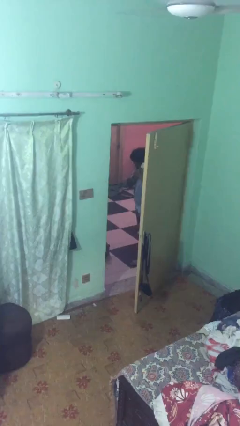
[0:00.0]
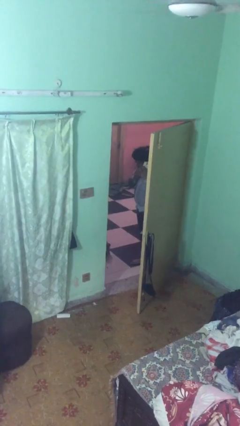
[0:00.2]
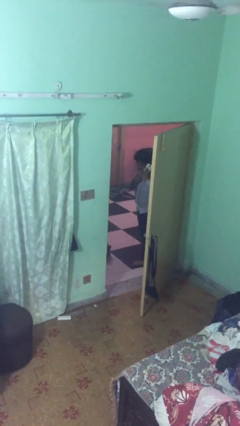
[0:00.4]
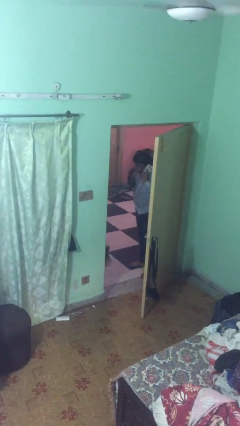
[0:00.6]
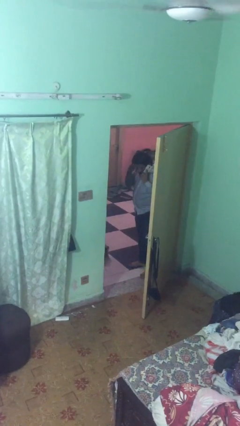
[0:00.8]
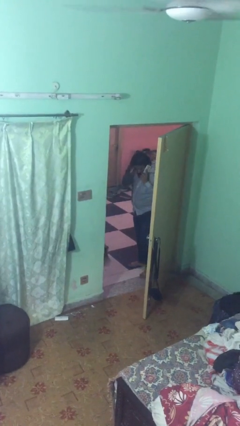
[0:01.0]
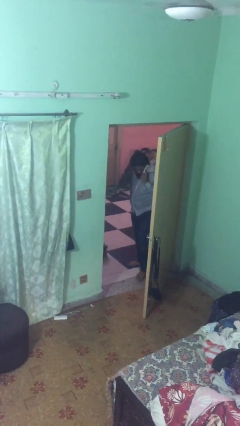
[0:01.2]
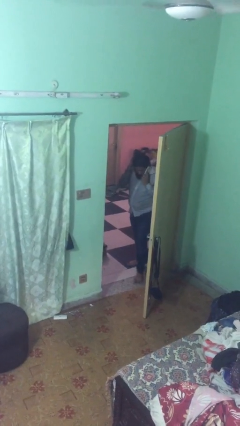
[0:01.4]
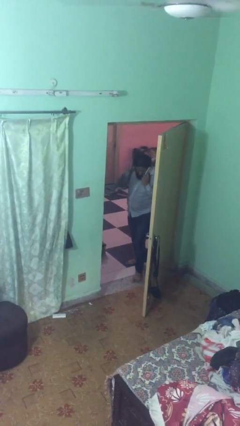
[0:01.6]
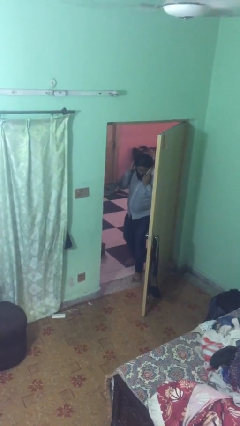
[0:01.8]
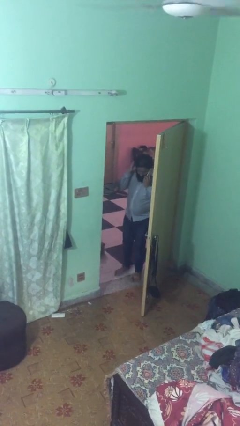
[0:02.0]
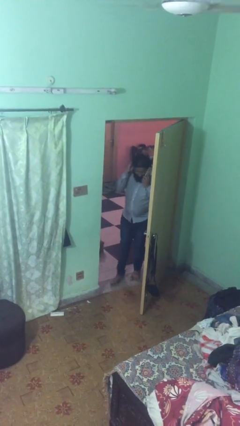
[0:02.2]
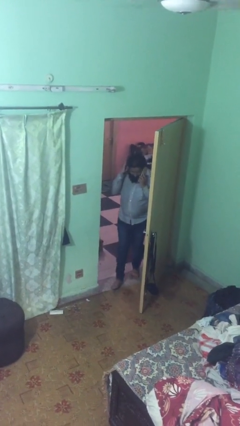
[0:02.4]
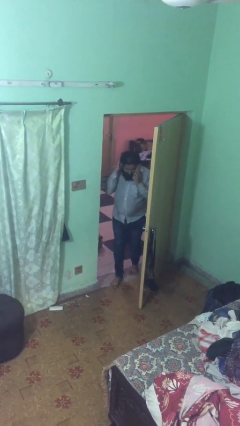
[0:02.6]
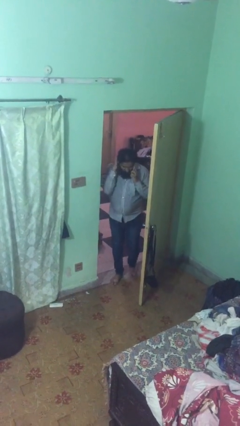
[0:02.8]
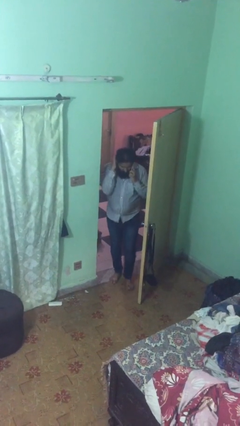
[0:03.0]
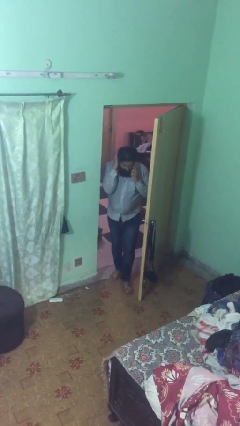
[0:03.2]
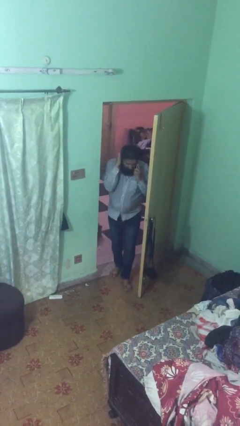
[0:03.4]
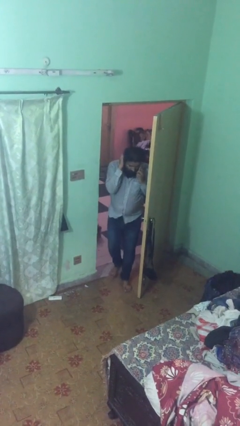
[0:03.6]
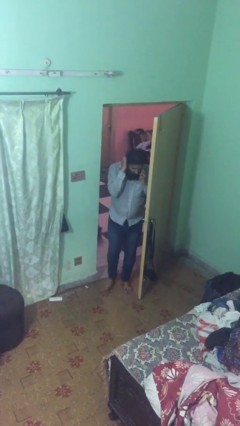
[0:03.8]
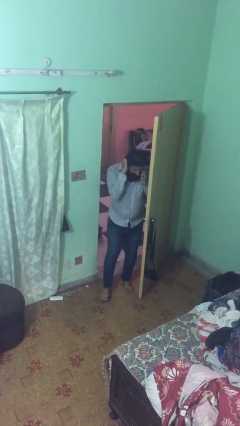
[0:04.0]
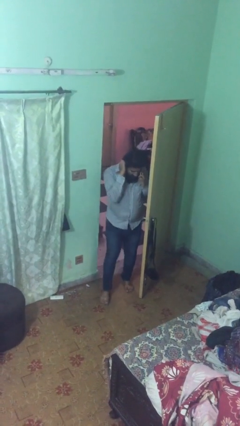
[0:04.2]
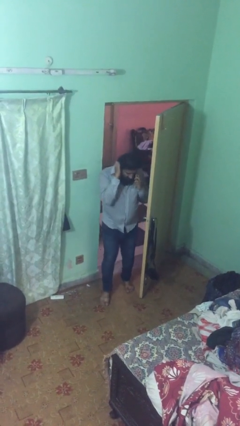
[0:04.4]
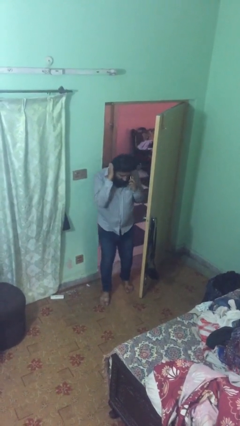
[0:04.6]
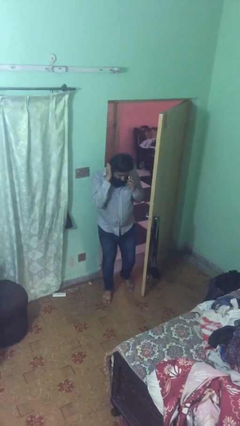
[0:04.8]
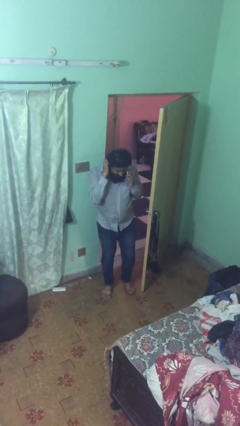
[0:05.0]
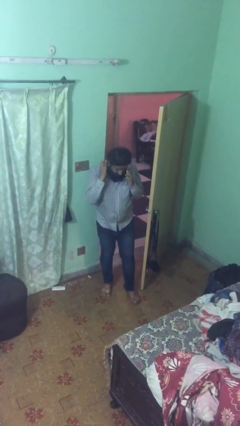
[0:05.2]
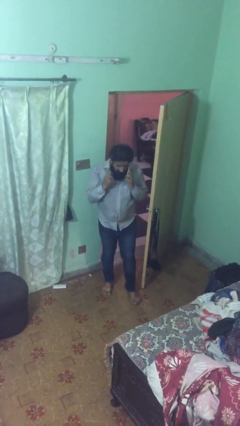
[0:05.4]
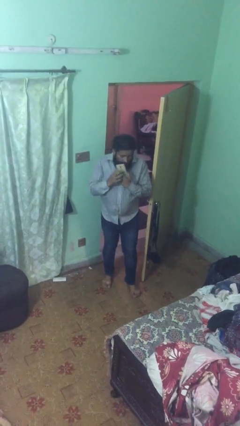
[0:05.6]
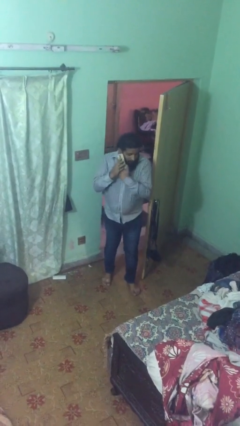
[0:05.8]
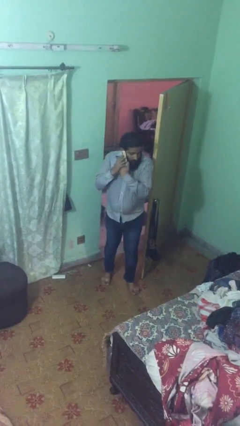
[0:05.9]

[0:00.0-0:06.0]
person enters scene through structure

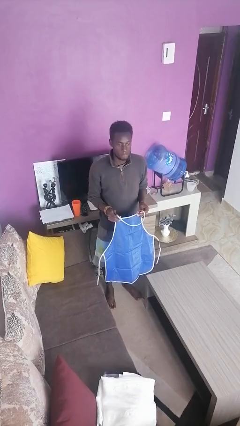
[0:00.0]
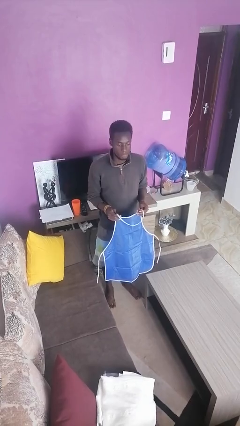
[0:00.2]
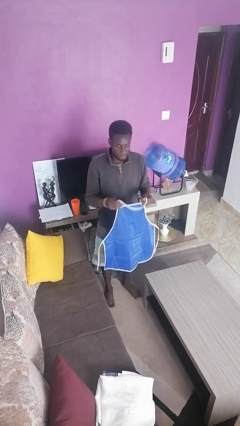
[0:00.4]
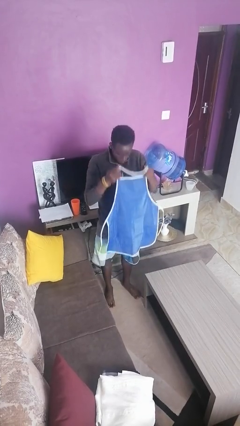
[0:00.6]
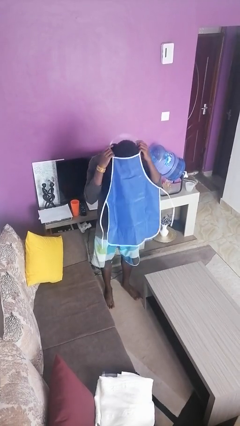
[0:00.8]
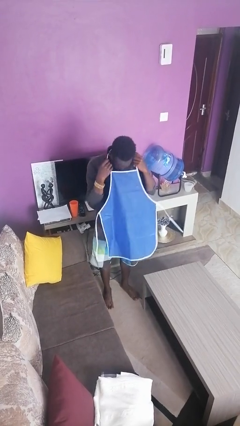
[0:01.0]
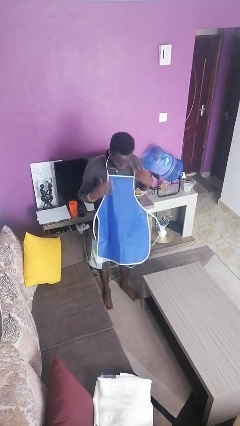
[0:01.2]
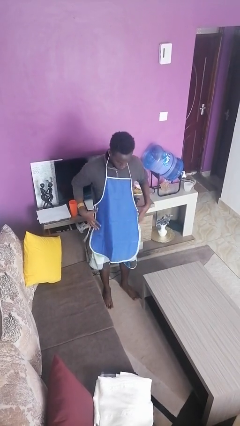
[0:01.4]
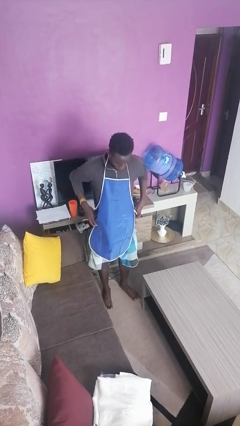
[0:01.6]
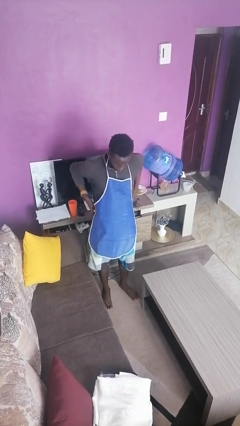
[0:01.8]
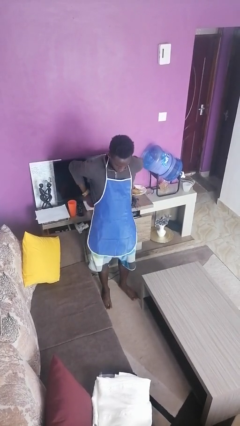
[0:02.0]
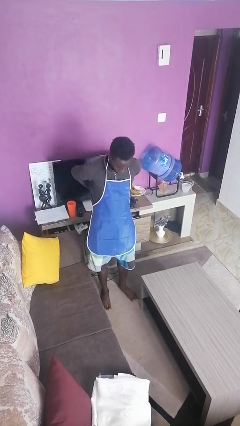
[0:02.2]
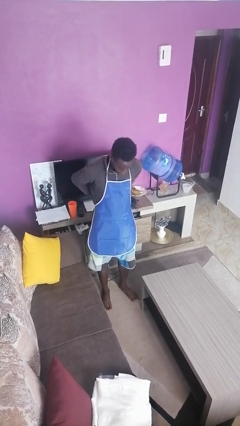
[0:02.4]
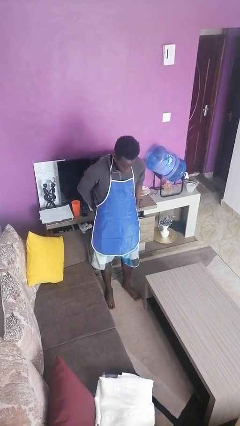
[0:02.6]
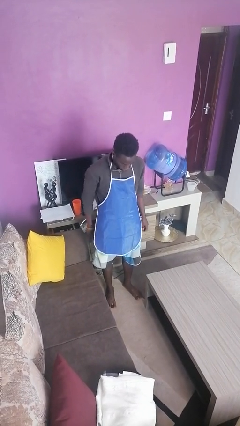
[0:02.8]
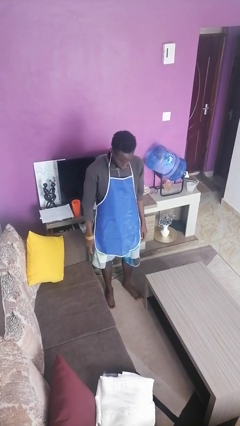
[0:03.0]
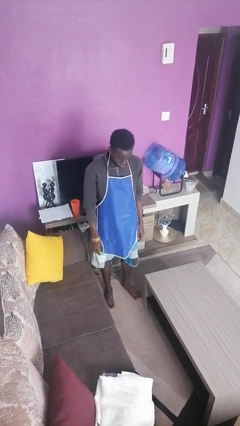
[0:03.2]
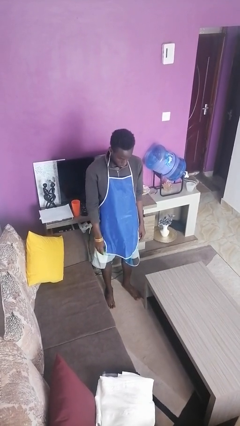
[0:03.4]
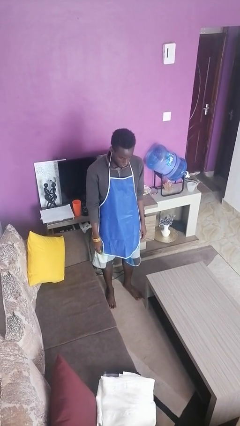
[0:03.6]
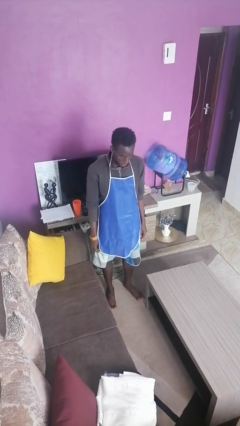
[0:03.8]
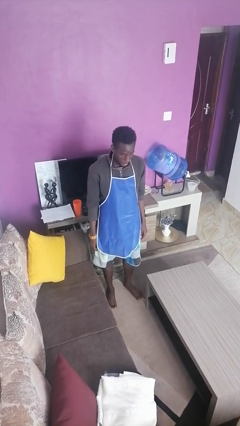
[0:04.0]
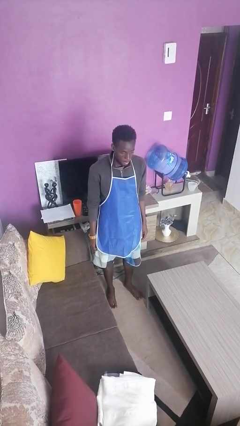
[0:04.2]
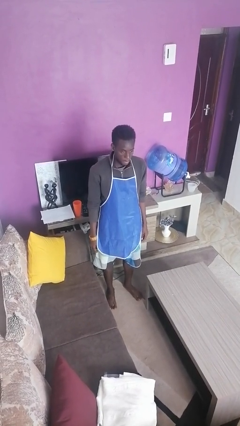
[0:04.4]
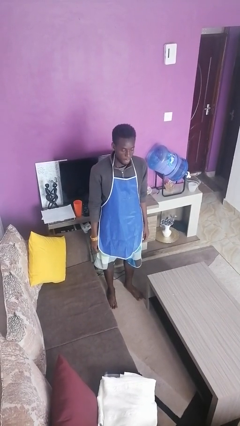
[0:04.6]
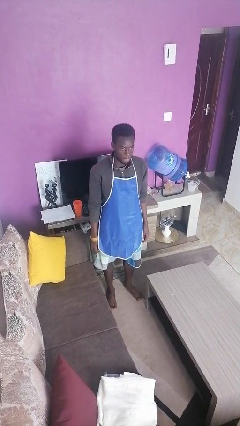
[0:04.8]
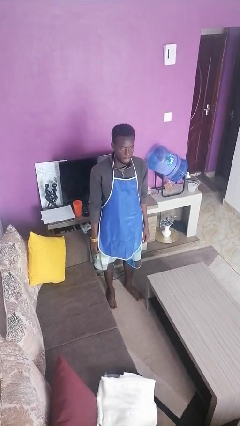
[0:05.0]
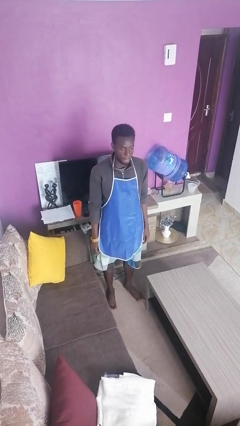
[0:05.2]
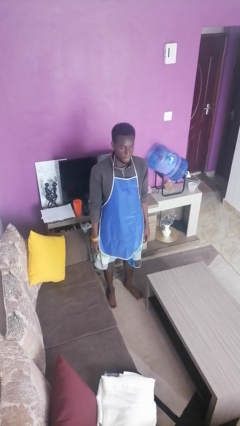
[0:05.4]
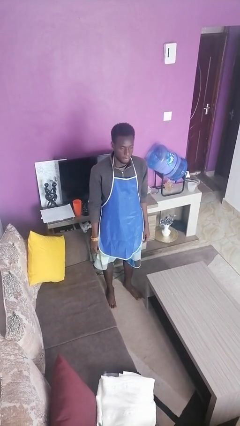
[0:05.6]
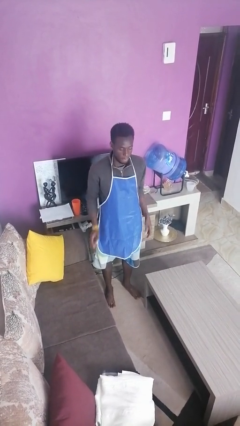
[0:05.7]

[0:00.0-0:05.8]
person puts on apron

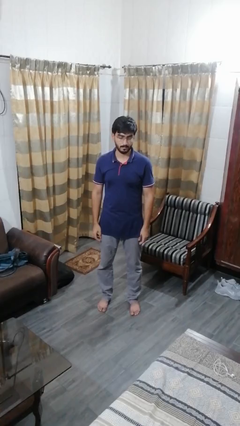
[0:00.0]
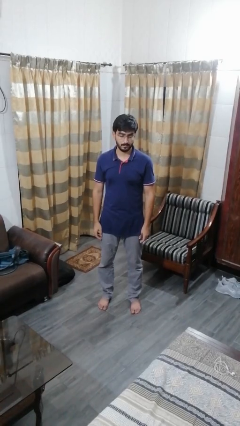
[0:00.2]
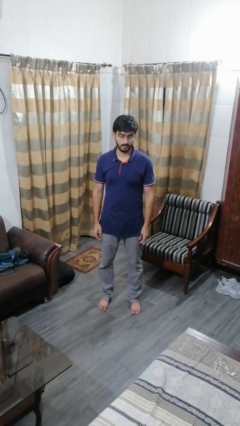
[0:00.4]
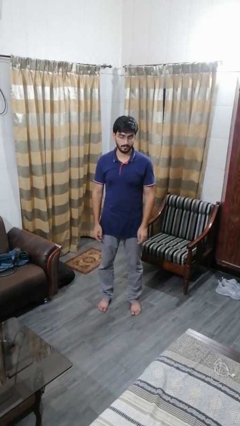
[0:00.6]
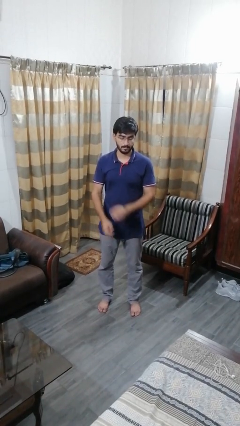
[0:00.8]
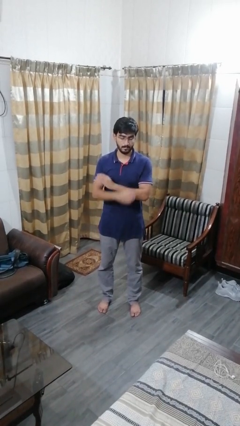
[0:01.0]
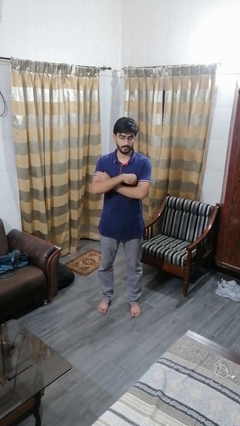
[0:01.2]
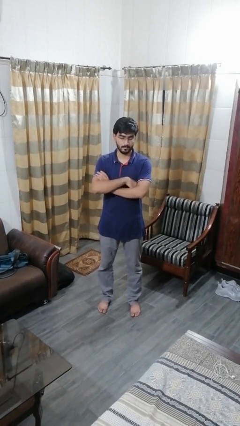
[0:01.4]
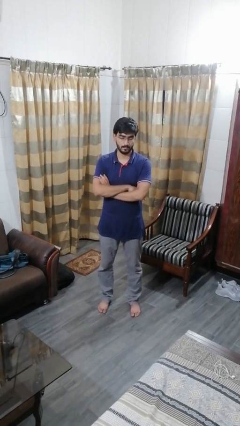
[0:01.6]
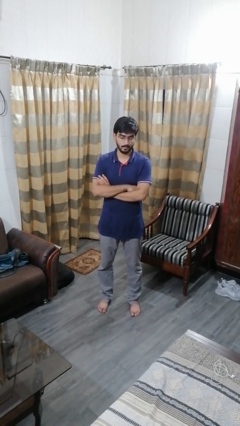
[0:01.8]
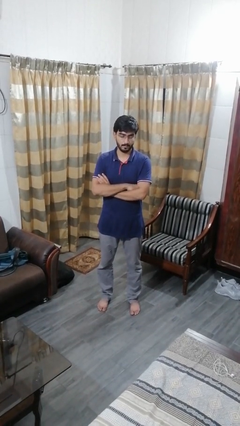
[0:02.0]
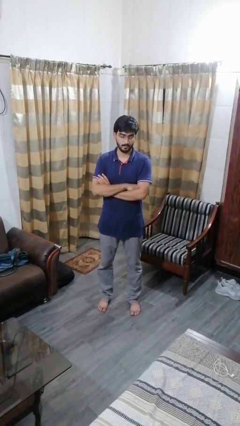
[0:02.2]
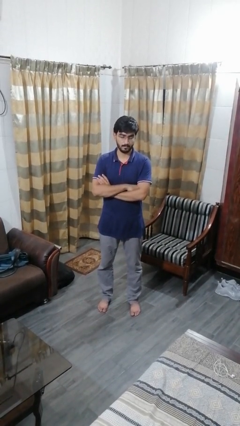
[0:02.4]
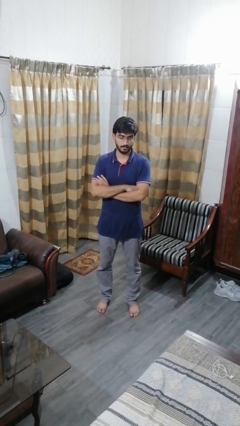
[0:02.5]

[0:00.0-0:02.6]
person crosses arms

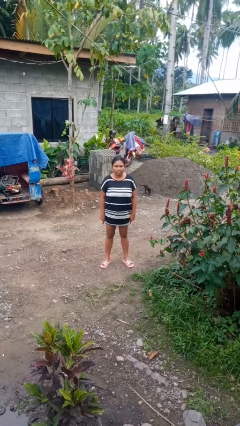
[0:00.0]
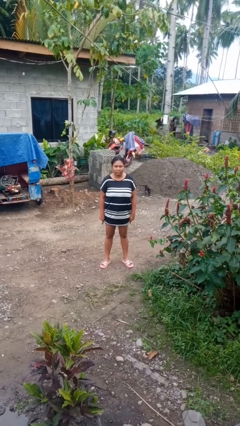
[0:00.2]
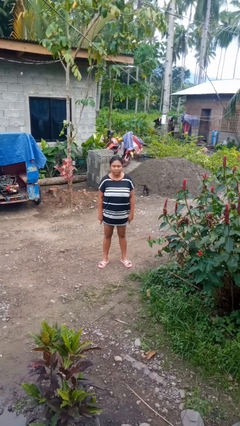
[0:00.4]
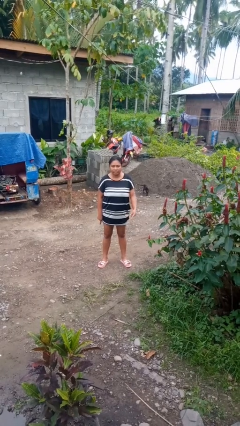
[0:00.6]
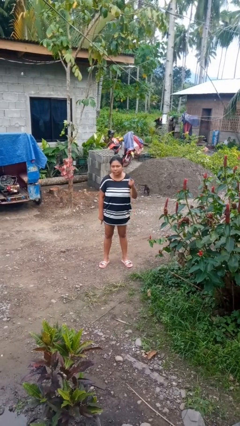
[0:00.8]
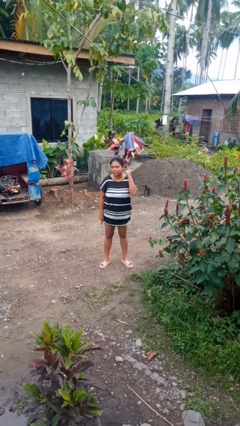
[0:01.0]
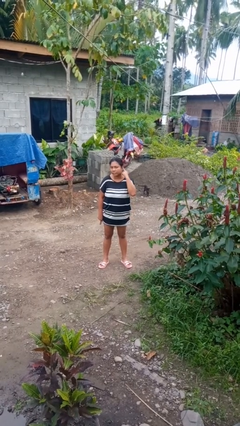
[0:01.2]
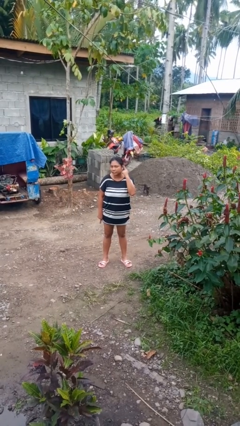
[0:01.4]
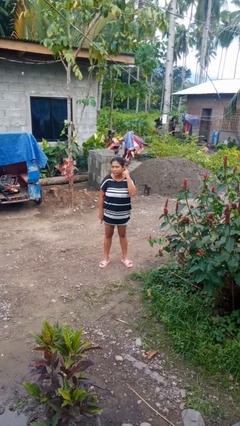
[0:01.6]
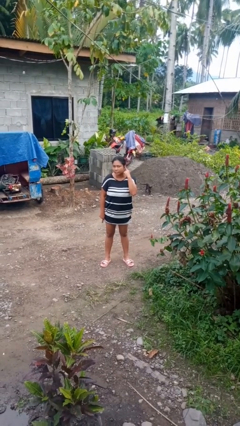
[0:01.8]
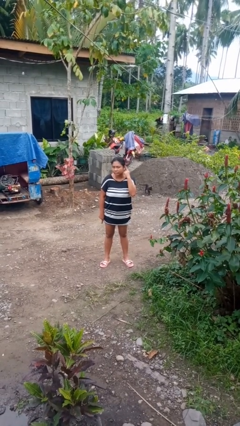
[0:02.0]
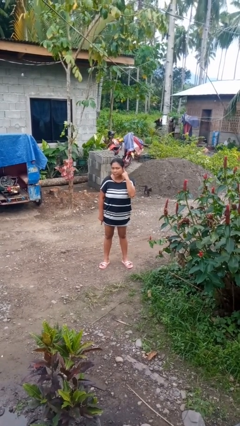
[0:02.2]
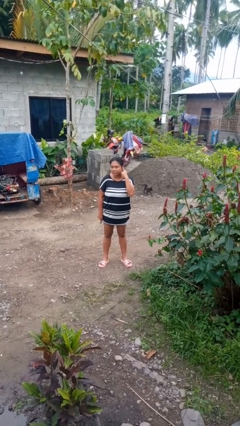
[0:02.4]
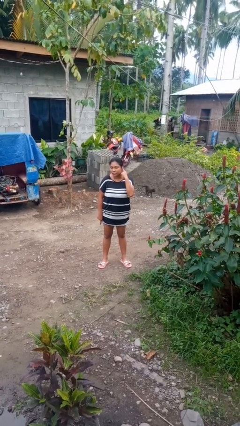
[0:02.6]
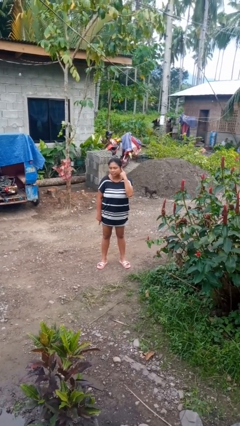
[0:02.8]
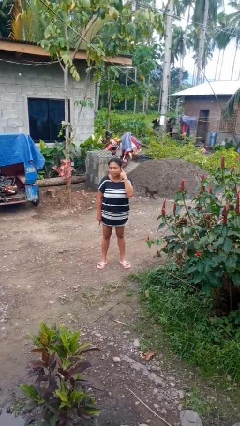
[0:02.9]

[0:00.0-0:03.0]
person gestures listen closely

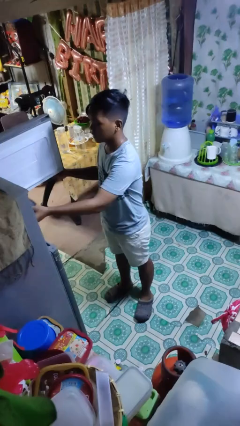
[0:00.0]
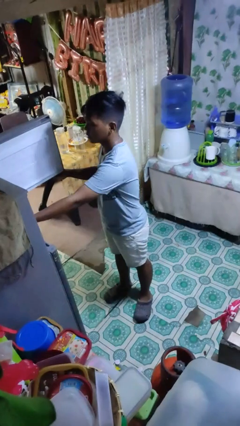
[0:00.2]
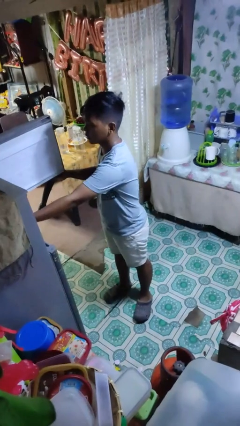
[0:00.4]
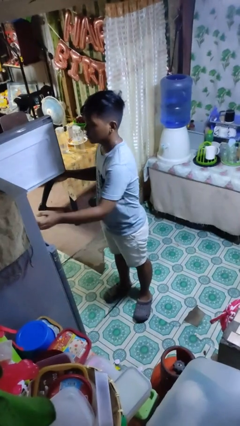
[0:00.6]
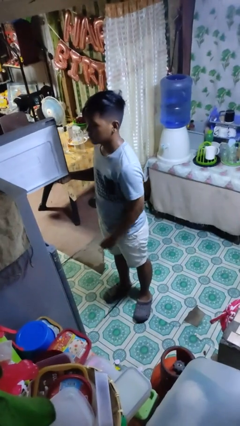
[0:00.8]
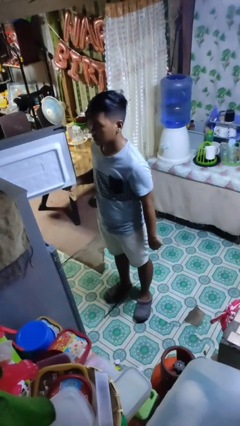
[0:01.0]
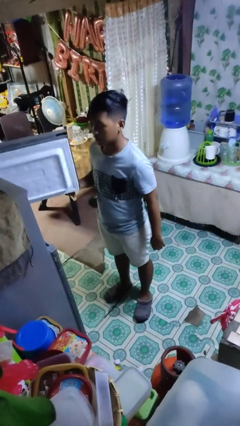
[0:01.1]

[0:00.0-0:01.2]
person puts object into refrigerator
